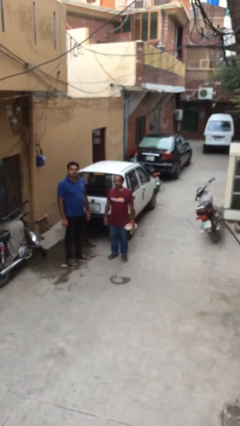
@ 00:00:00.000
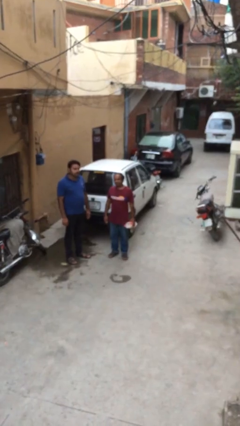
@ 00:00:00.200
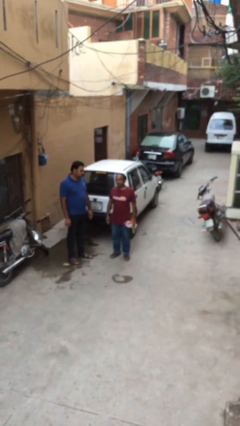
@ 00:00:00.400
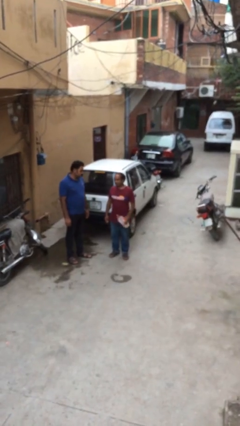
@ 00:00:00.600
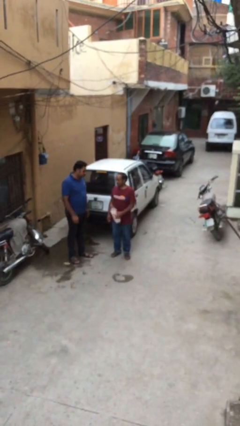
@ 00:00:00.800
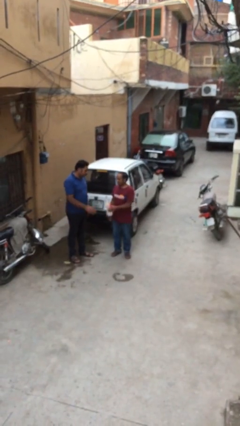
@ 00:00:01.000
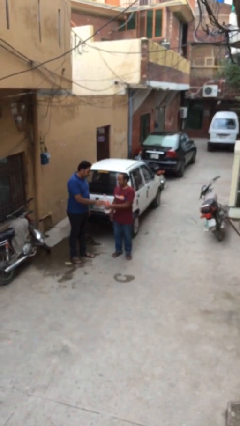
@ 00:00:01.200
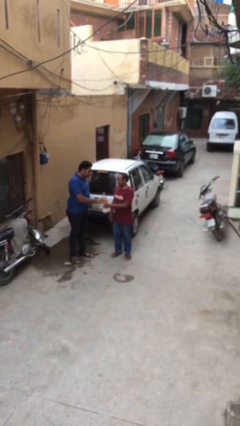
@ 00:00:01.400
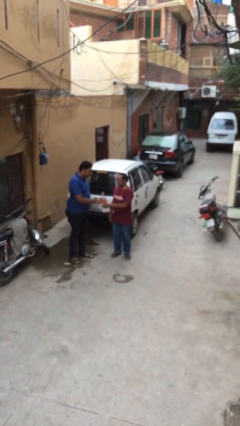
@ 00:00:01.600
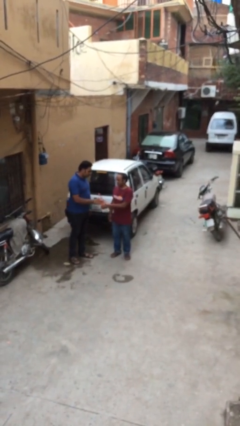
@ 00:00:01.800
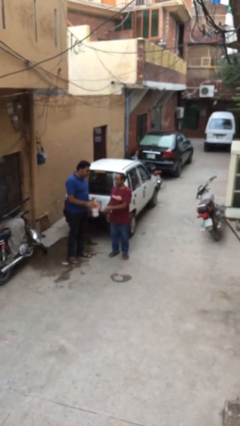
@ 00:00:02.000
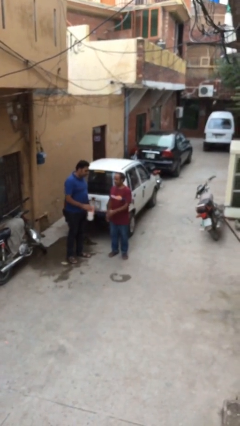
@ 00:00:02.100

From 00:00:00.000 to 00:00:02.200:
person transfers object to person

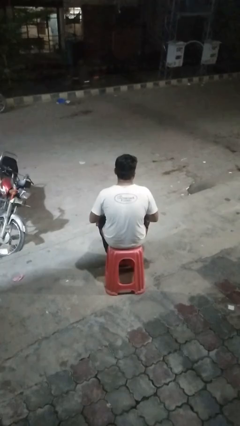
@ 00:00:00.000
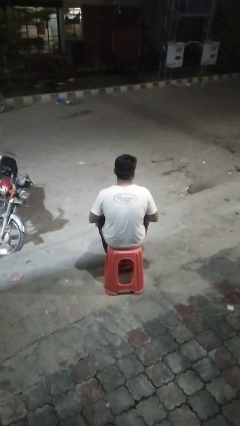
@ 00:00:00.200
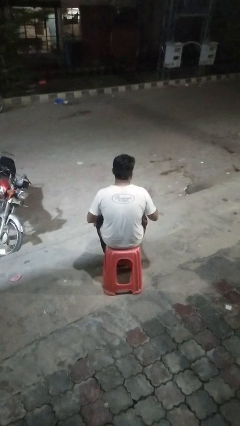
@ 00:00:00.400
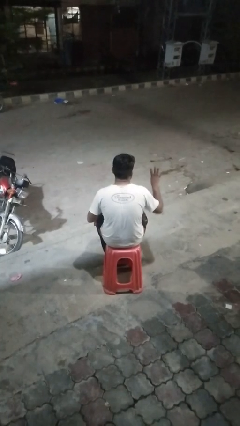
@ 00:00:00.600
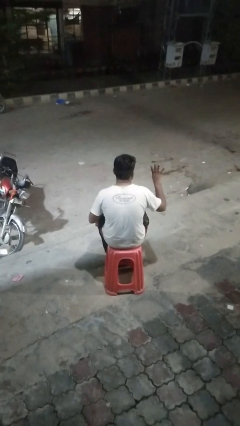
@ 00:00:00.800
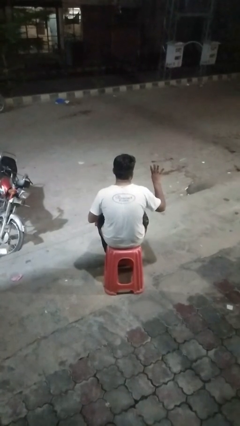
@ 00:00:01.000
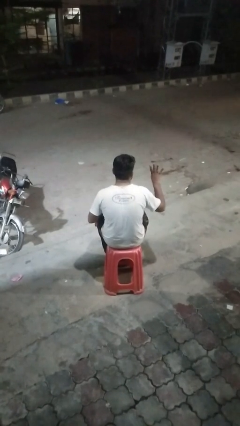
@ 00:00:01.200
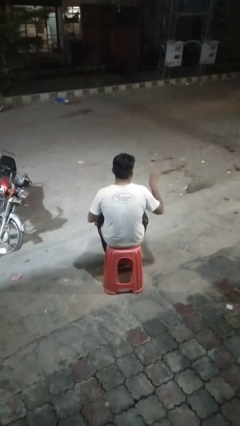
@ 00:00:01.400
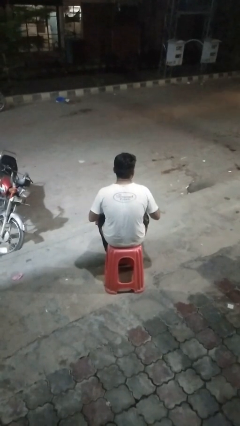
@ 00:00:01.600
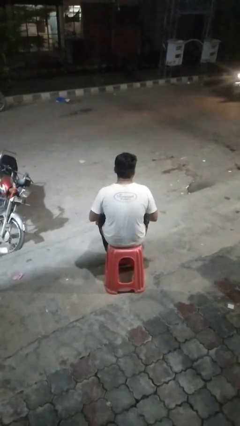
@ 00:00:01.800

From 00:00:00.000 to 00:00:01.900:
person gestures number four

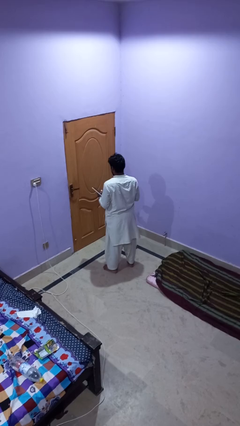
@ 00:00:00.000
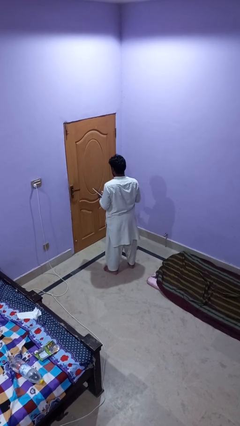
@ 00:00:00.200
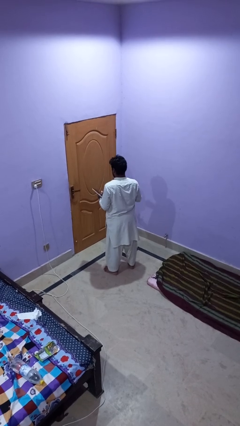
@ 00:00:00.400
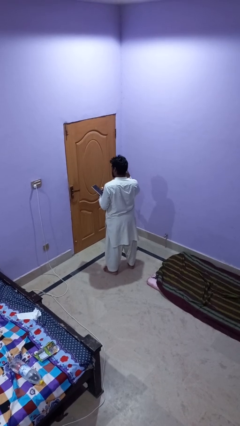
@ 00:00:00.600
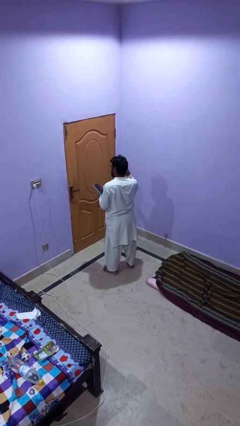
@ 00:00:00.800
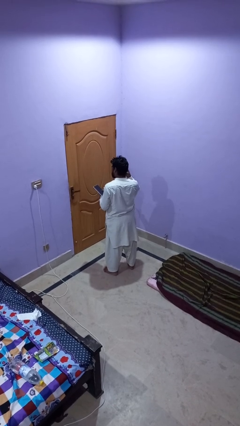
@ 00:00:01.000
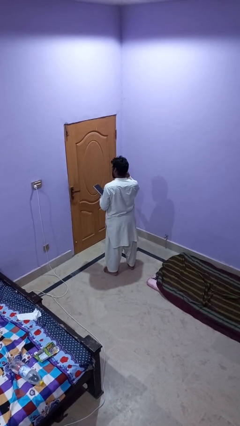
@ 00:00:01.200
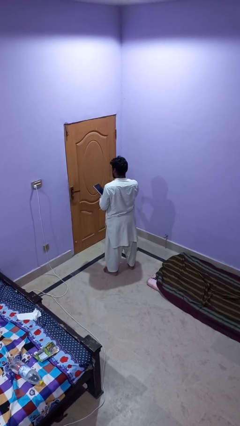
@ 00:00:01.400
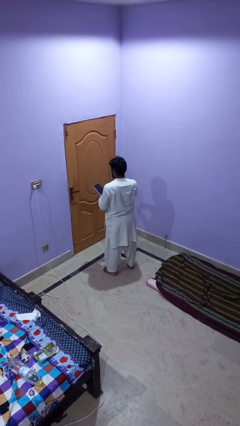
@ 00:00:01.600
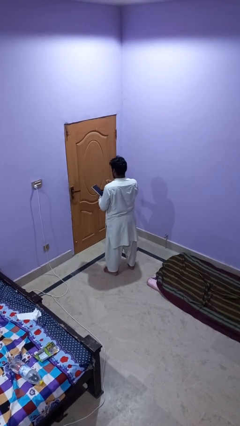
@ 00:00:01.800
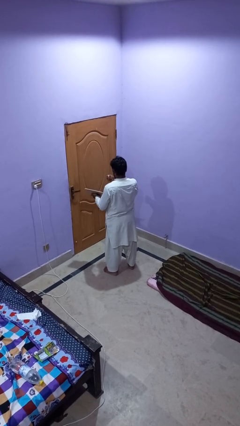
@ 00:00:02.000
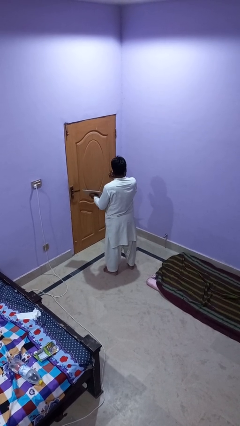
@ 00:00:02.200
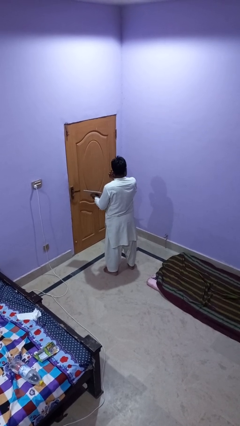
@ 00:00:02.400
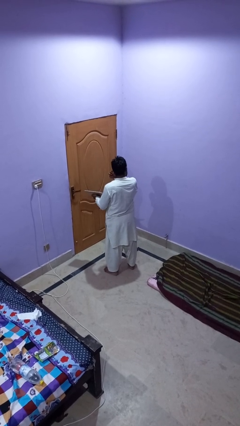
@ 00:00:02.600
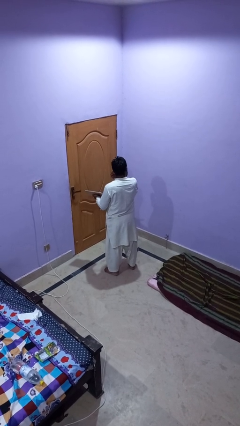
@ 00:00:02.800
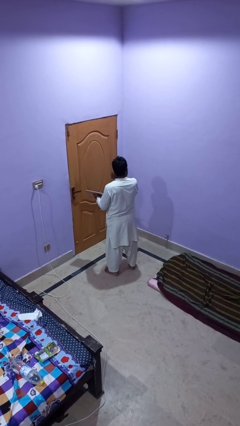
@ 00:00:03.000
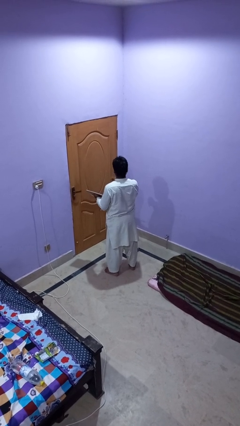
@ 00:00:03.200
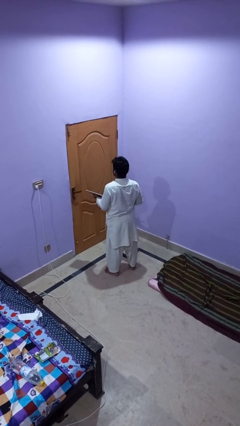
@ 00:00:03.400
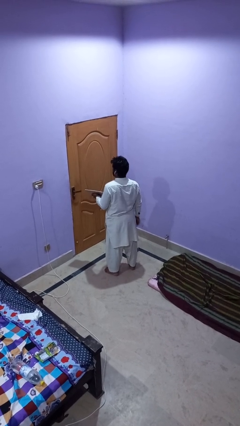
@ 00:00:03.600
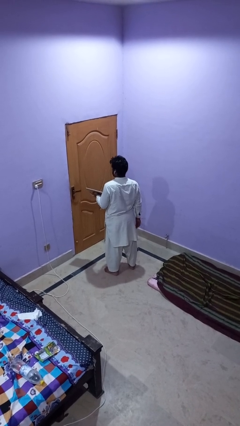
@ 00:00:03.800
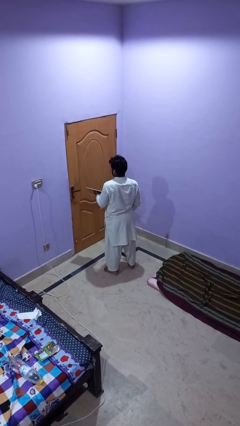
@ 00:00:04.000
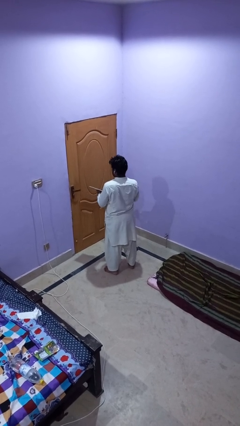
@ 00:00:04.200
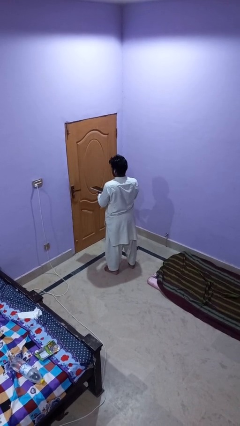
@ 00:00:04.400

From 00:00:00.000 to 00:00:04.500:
person puts on headphones

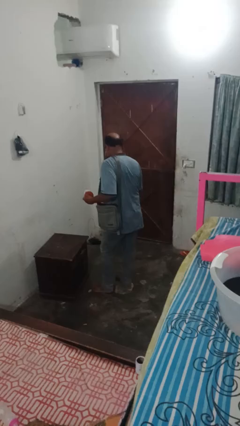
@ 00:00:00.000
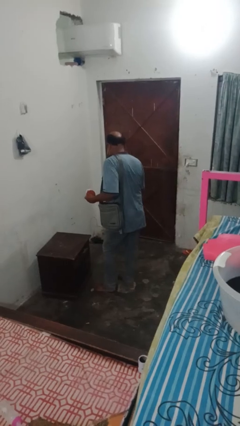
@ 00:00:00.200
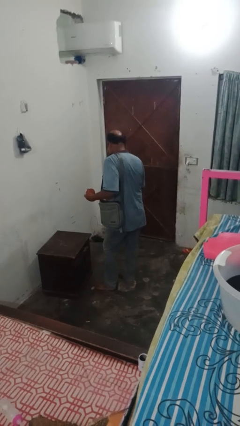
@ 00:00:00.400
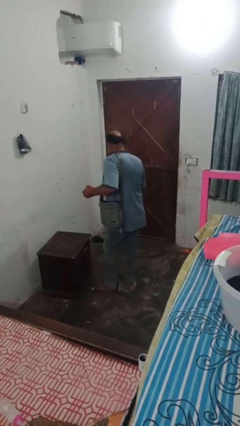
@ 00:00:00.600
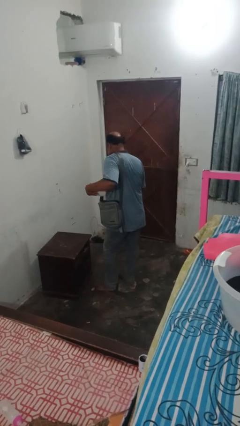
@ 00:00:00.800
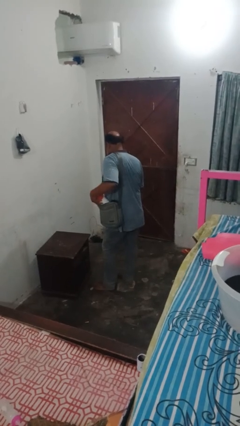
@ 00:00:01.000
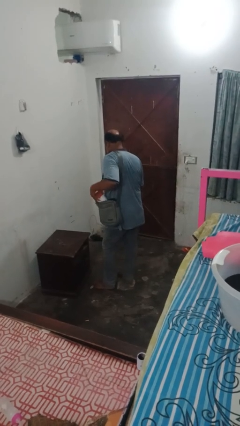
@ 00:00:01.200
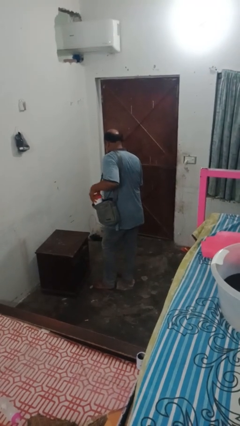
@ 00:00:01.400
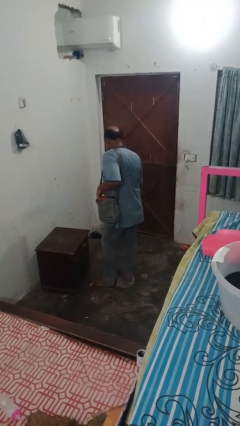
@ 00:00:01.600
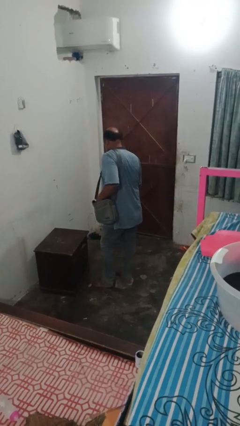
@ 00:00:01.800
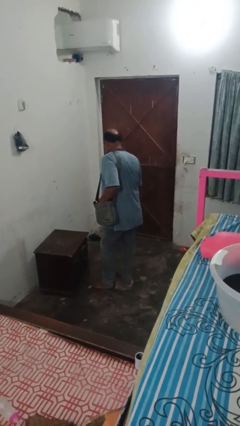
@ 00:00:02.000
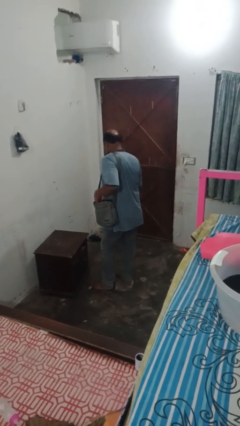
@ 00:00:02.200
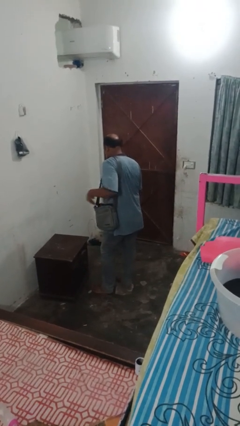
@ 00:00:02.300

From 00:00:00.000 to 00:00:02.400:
person puts object into bag

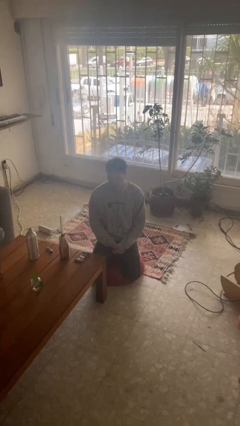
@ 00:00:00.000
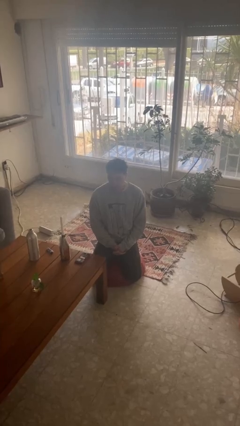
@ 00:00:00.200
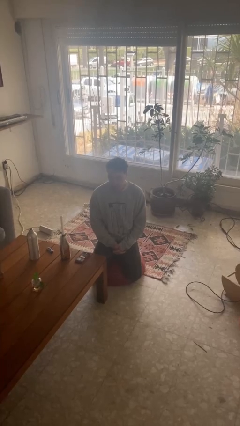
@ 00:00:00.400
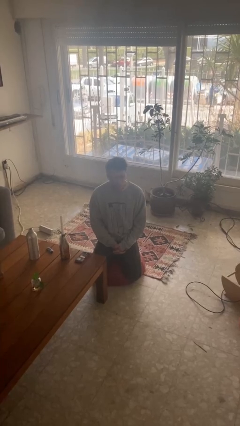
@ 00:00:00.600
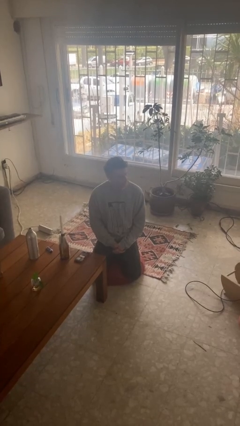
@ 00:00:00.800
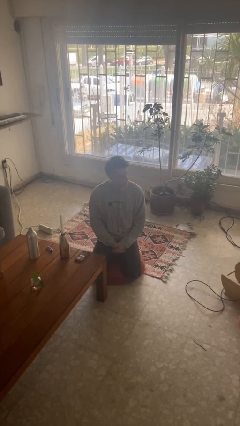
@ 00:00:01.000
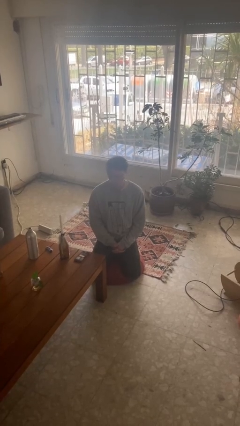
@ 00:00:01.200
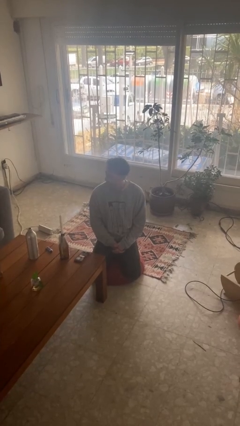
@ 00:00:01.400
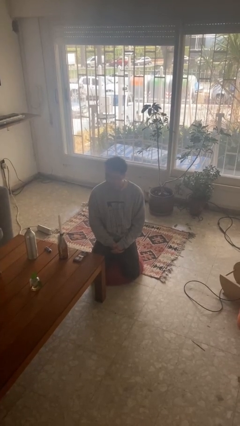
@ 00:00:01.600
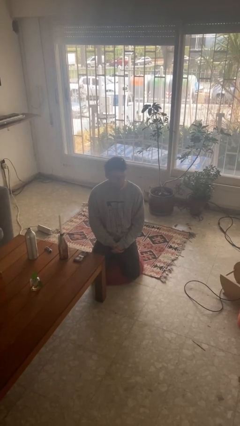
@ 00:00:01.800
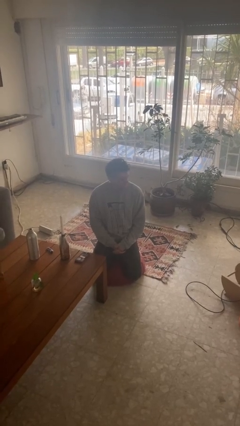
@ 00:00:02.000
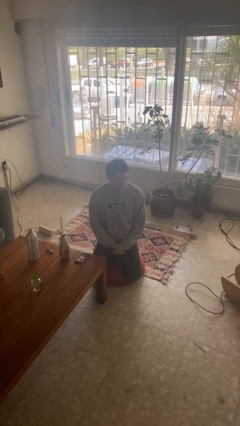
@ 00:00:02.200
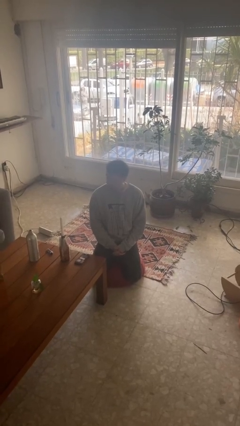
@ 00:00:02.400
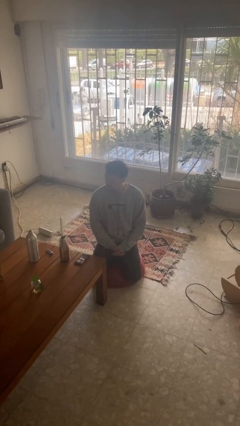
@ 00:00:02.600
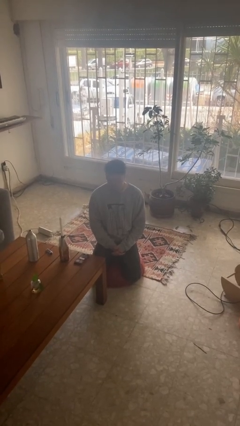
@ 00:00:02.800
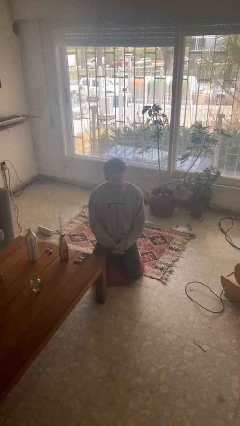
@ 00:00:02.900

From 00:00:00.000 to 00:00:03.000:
person shakes head

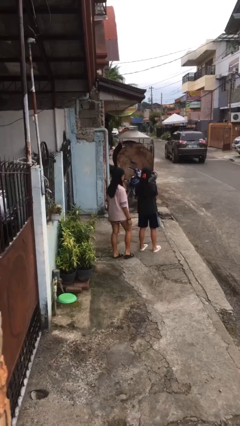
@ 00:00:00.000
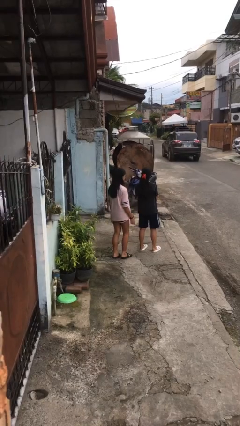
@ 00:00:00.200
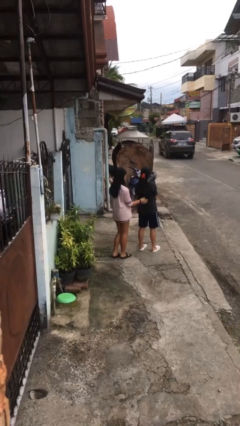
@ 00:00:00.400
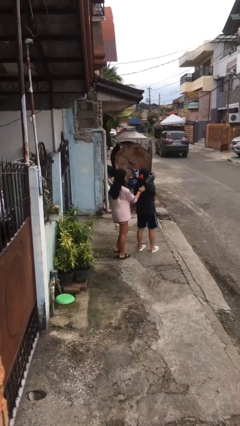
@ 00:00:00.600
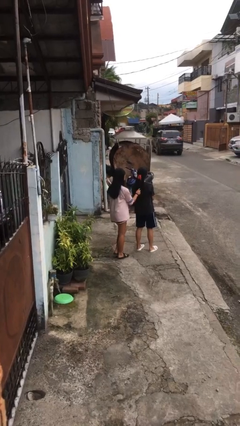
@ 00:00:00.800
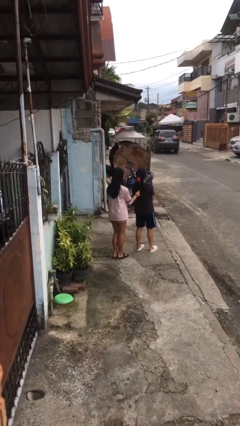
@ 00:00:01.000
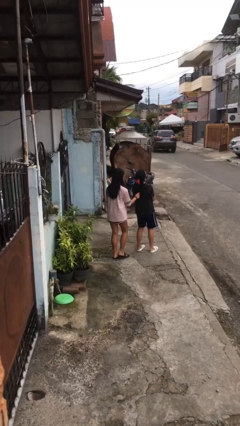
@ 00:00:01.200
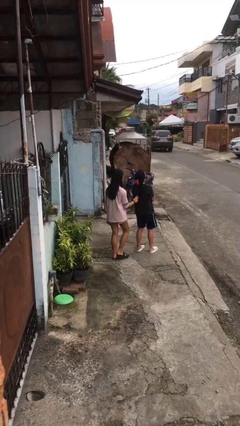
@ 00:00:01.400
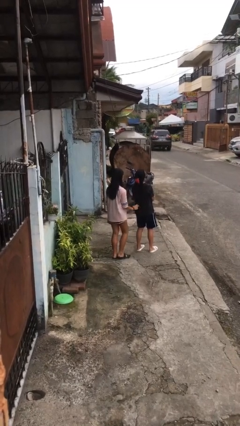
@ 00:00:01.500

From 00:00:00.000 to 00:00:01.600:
person grabs person by hair

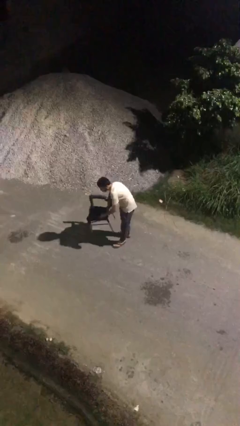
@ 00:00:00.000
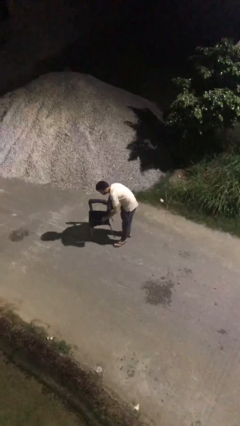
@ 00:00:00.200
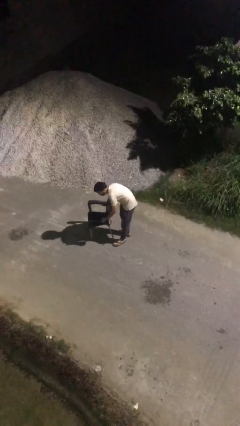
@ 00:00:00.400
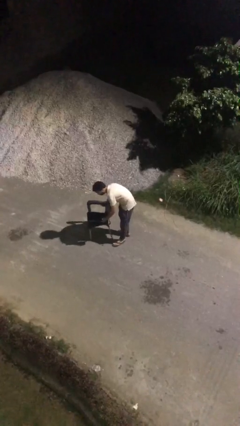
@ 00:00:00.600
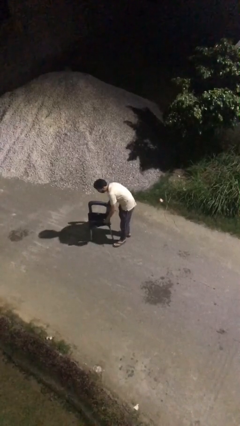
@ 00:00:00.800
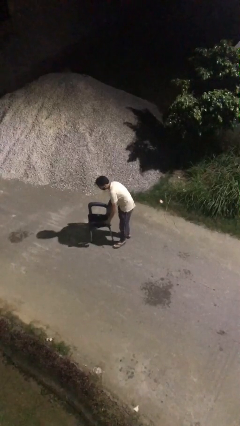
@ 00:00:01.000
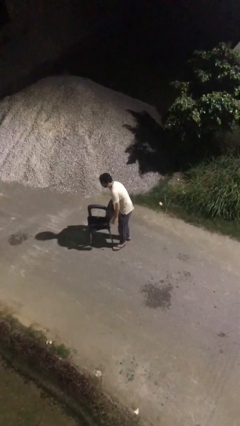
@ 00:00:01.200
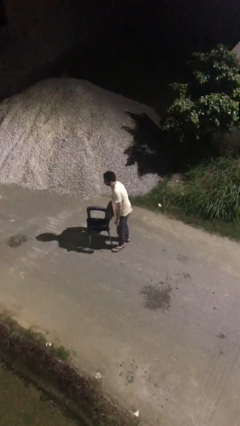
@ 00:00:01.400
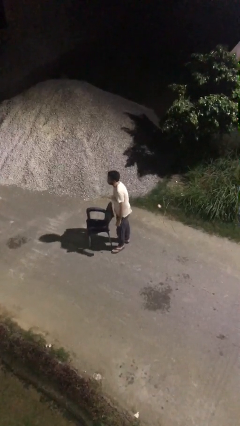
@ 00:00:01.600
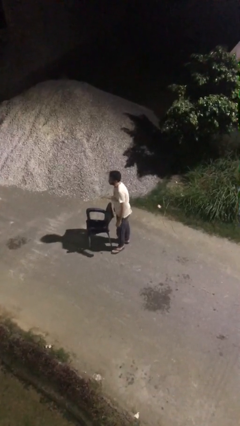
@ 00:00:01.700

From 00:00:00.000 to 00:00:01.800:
person puts down object on floor
